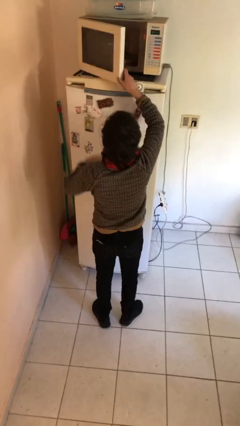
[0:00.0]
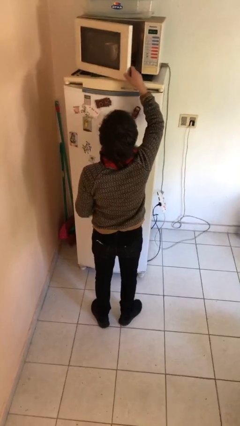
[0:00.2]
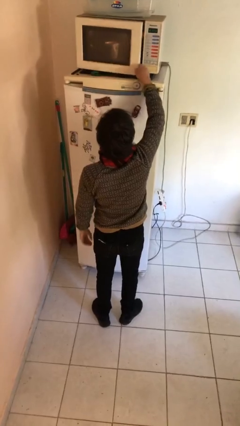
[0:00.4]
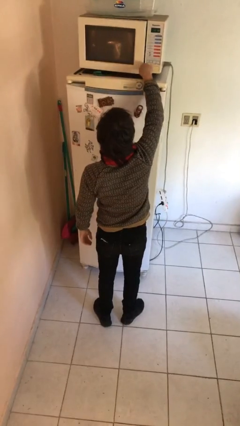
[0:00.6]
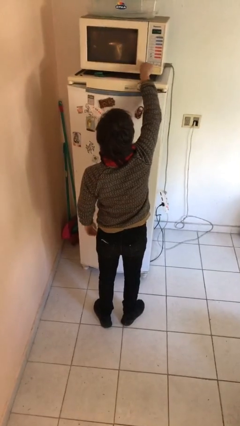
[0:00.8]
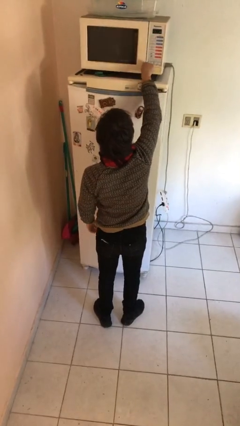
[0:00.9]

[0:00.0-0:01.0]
person closes microwave

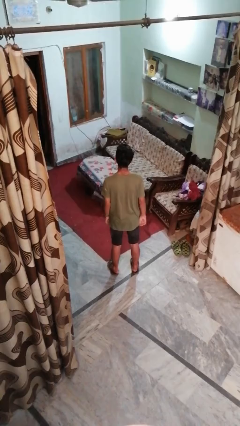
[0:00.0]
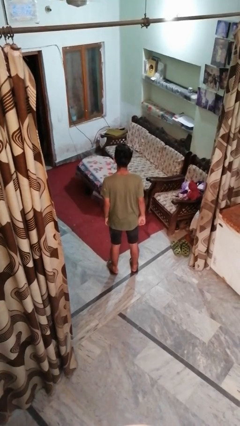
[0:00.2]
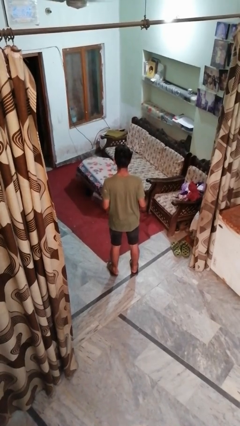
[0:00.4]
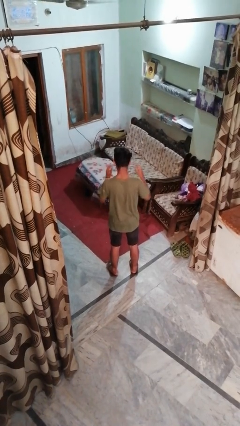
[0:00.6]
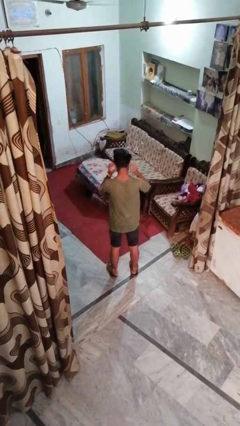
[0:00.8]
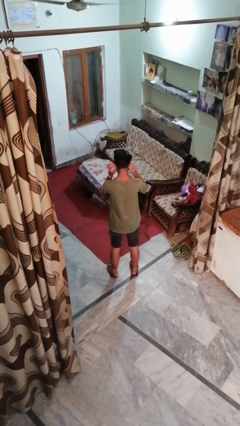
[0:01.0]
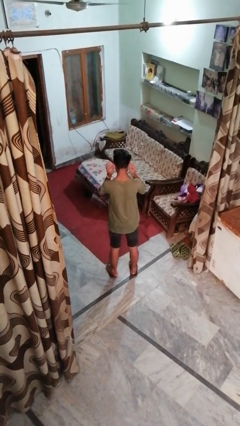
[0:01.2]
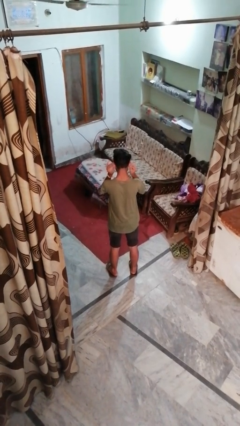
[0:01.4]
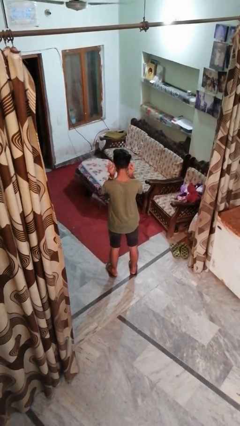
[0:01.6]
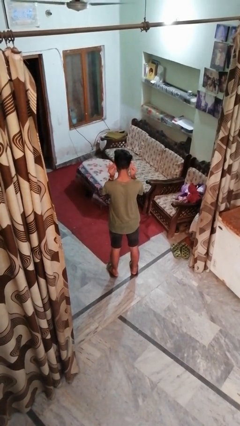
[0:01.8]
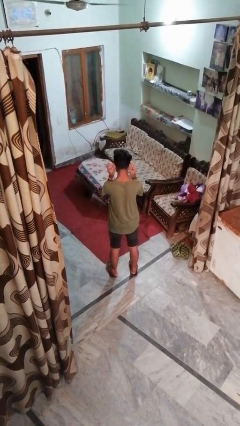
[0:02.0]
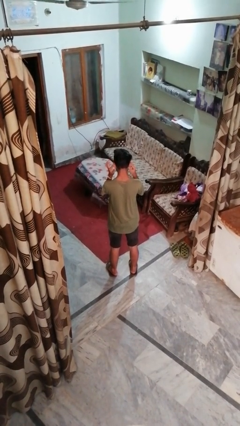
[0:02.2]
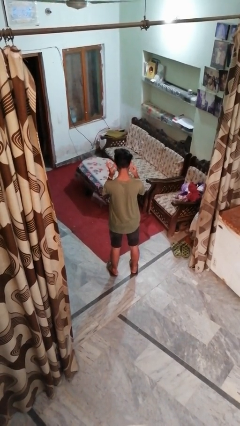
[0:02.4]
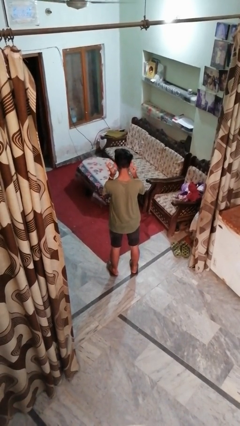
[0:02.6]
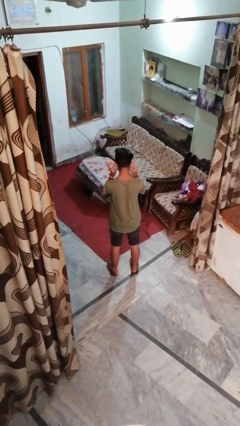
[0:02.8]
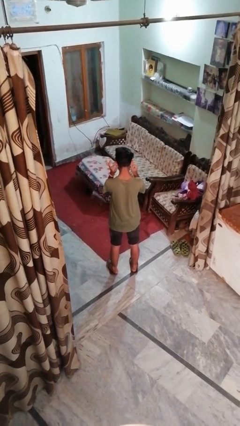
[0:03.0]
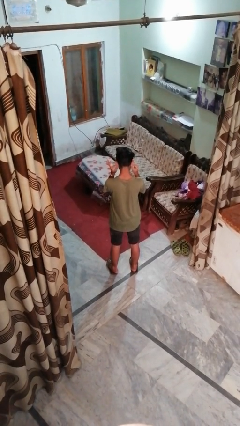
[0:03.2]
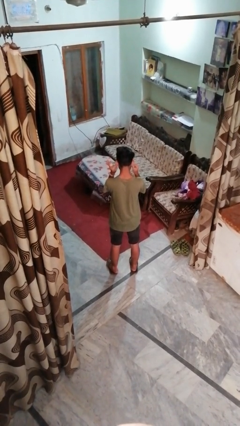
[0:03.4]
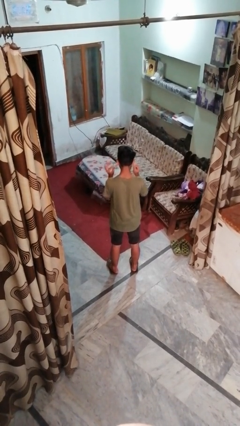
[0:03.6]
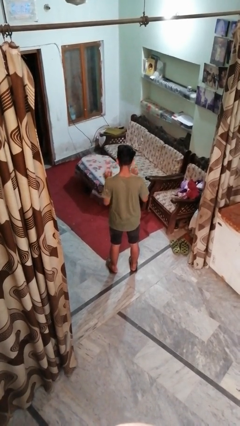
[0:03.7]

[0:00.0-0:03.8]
person touches earlobe

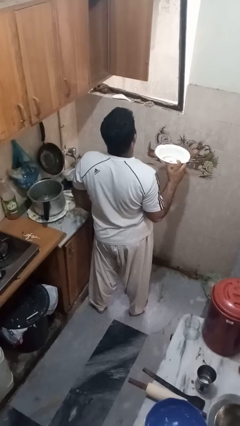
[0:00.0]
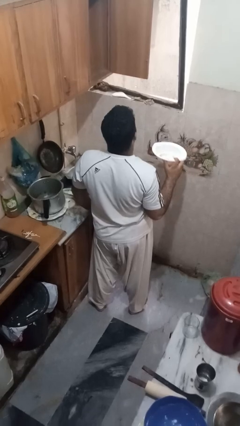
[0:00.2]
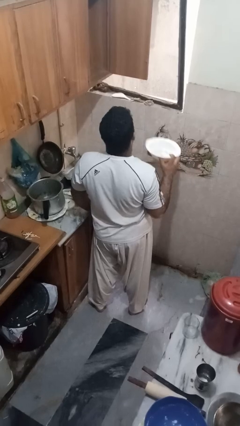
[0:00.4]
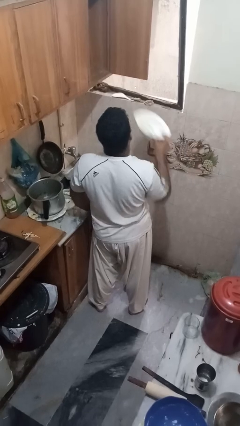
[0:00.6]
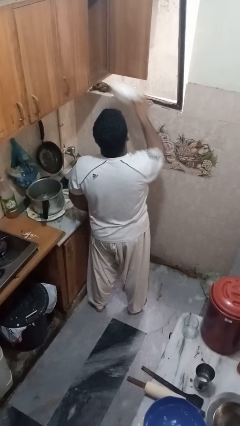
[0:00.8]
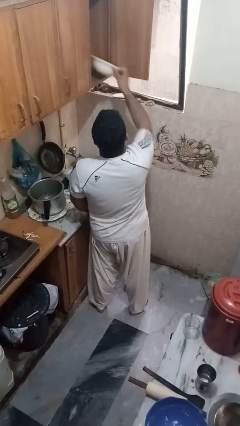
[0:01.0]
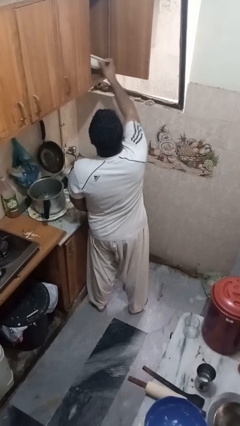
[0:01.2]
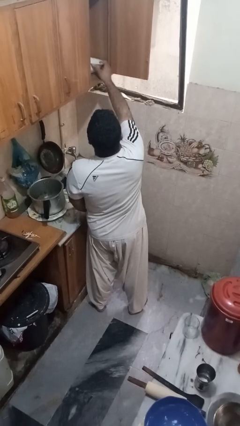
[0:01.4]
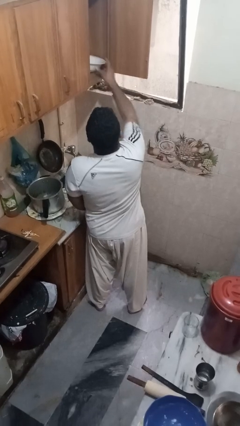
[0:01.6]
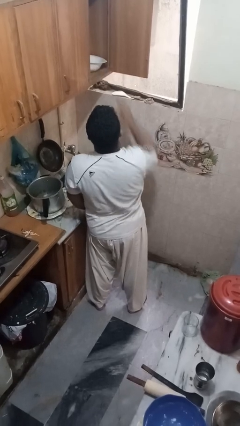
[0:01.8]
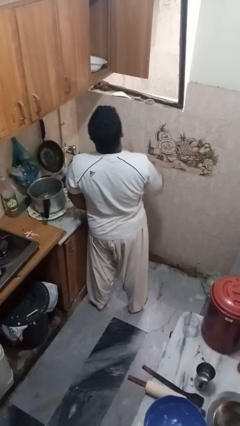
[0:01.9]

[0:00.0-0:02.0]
person puts object in cabinet

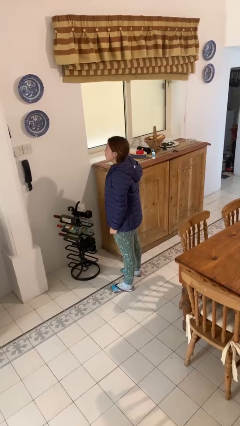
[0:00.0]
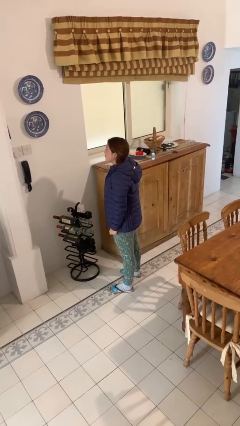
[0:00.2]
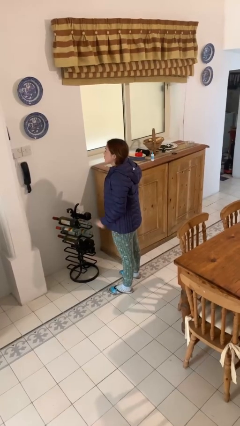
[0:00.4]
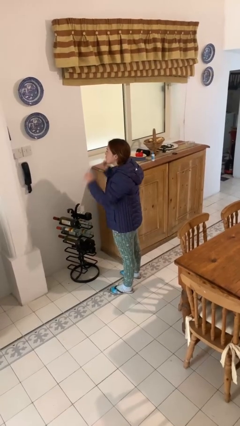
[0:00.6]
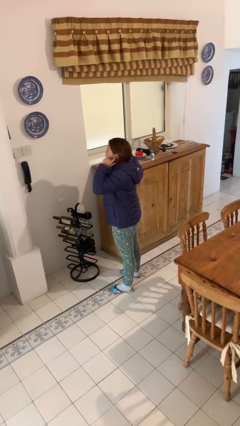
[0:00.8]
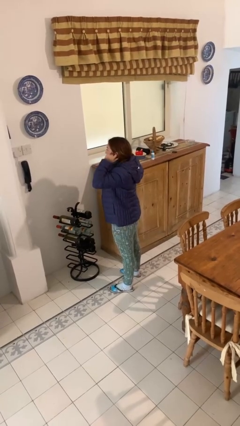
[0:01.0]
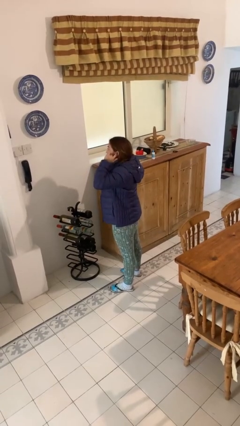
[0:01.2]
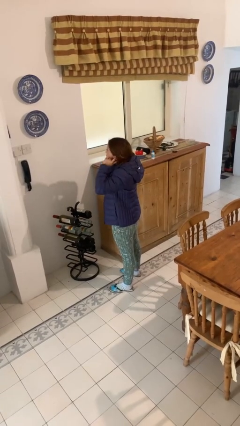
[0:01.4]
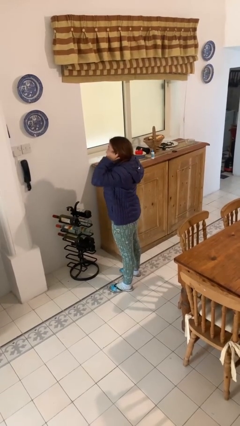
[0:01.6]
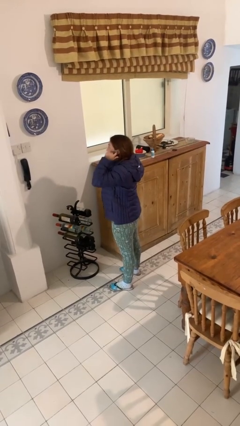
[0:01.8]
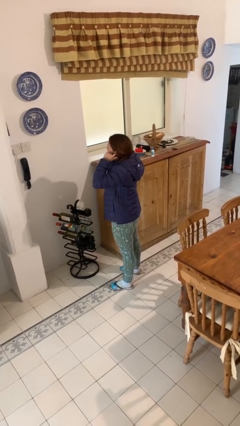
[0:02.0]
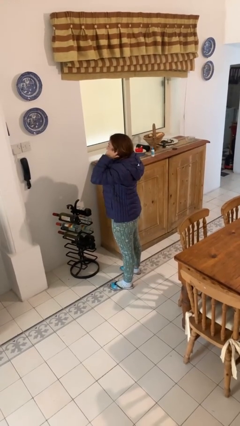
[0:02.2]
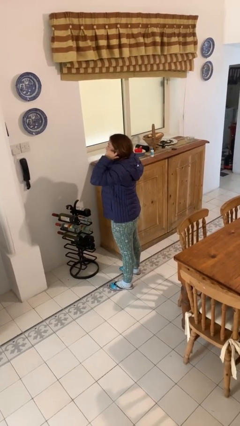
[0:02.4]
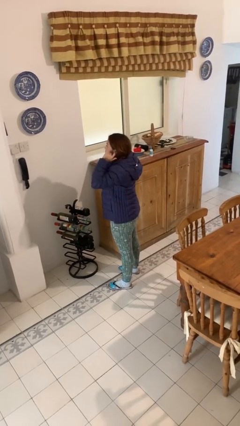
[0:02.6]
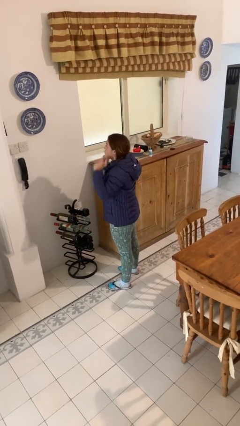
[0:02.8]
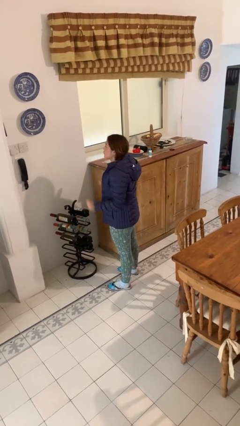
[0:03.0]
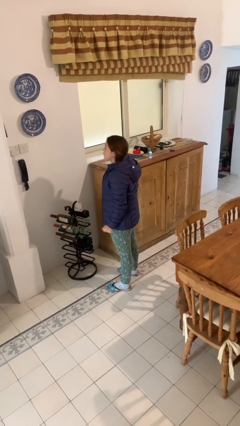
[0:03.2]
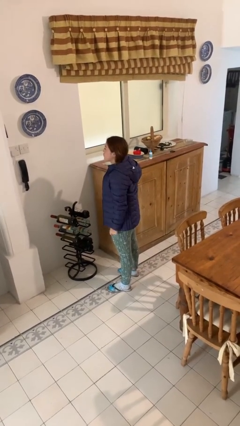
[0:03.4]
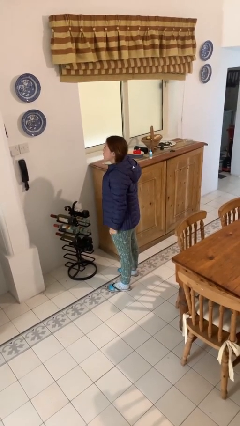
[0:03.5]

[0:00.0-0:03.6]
person puts fingers in ear

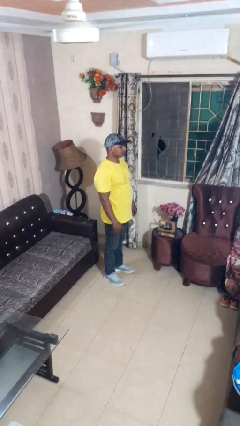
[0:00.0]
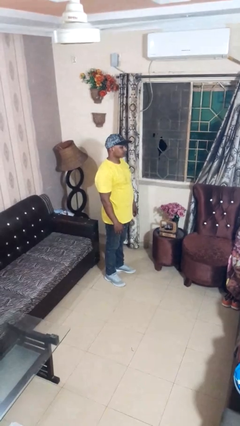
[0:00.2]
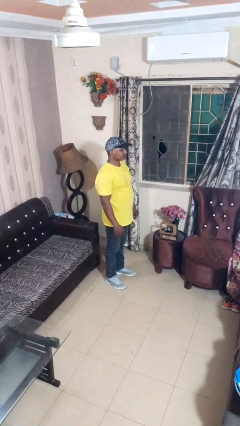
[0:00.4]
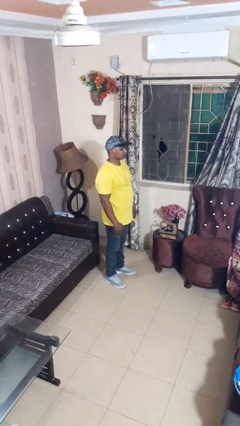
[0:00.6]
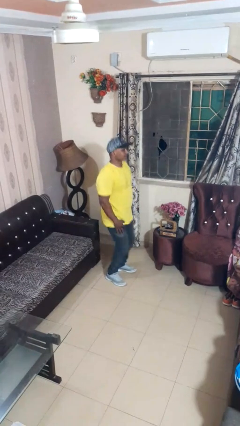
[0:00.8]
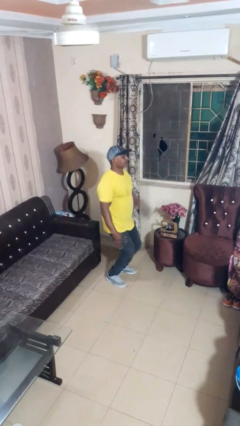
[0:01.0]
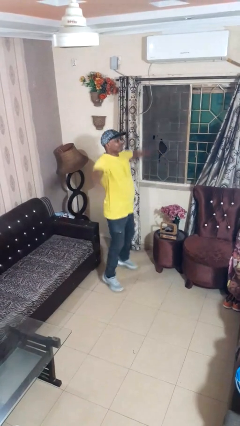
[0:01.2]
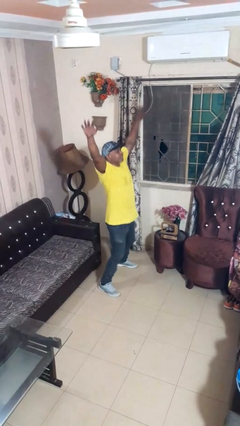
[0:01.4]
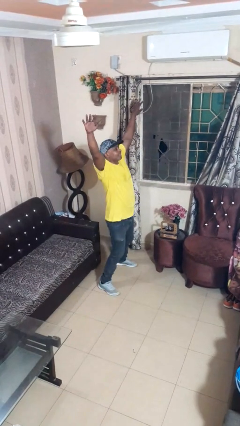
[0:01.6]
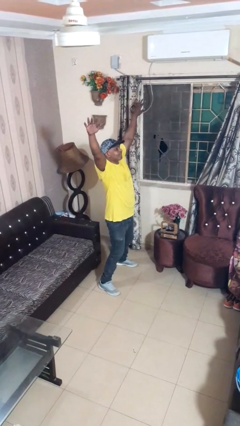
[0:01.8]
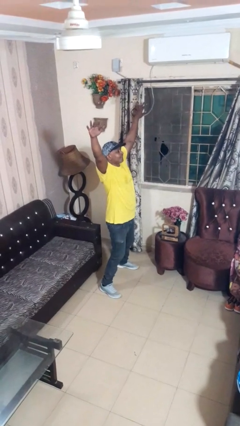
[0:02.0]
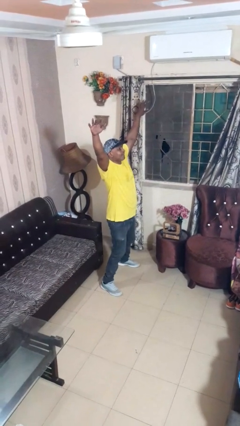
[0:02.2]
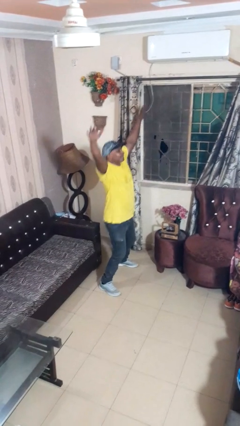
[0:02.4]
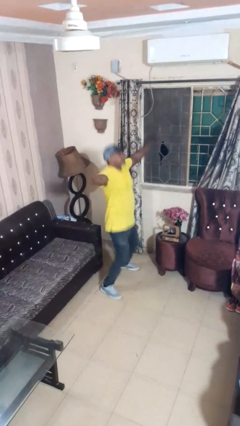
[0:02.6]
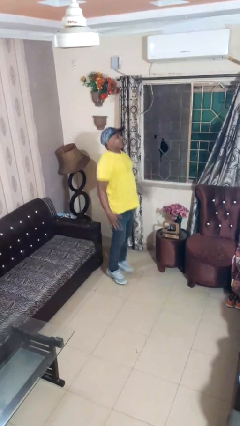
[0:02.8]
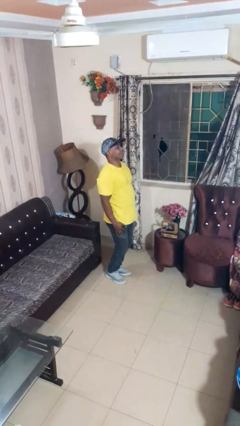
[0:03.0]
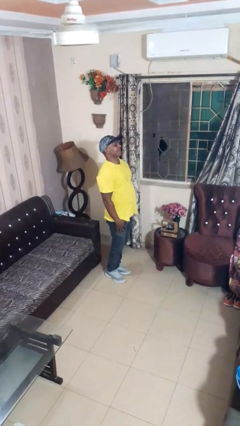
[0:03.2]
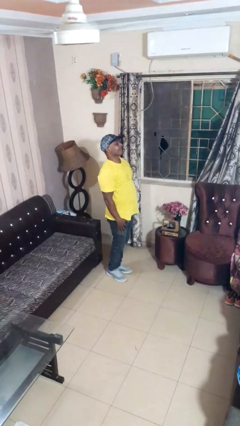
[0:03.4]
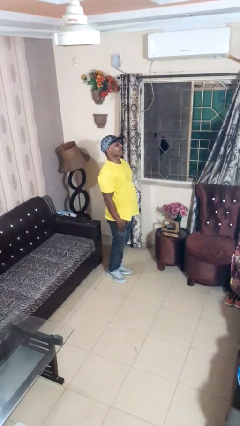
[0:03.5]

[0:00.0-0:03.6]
person exercises with jumping jacks

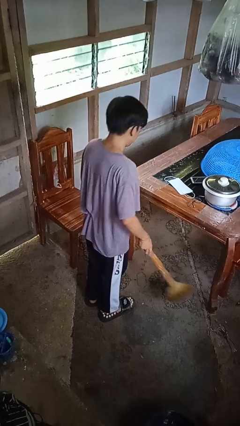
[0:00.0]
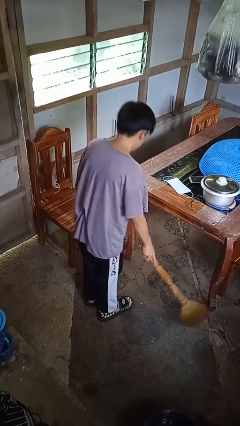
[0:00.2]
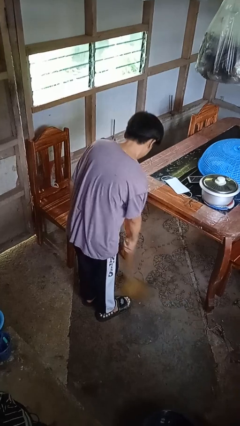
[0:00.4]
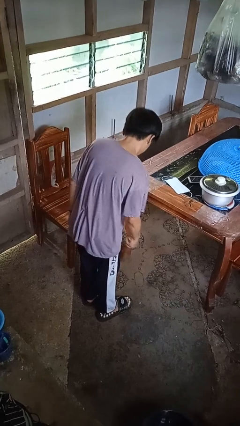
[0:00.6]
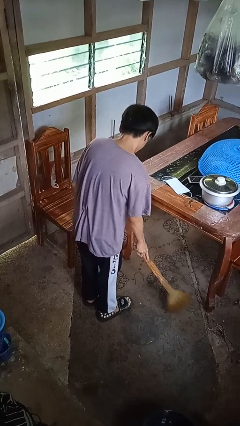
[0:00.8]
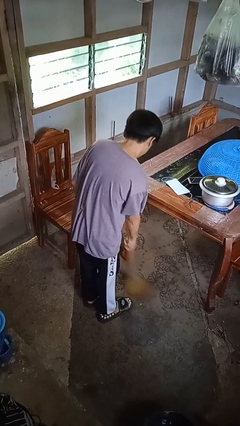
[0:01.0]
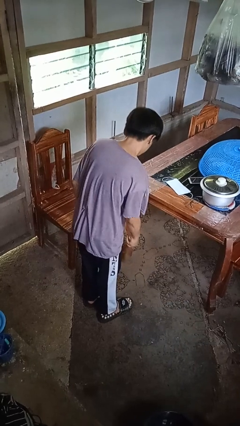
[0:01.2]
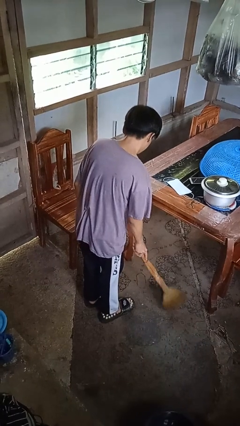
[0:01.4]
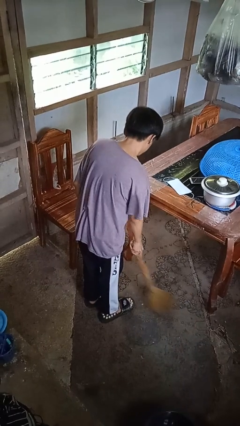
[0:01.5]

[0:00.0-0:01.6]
person sweeps floor

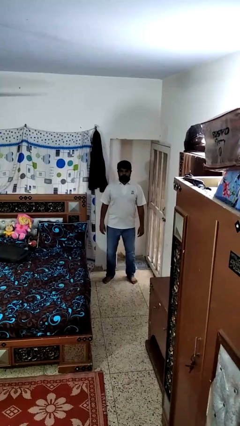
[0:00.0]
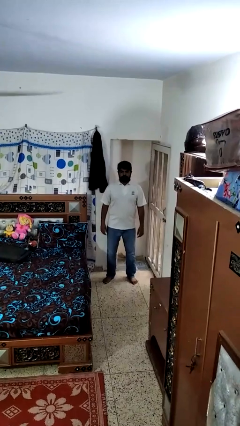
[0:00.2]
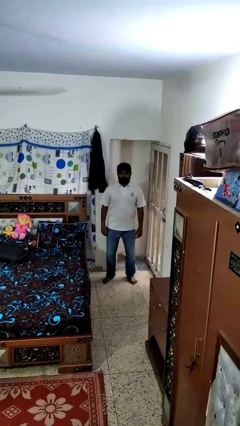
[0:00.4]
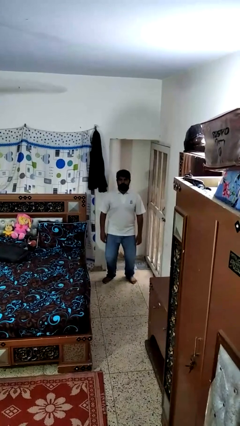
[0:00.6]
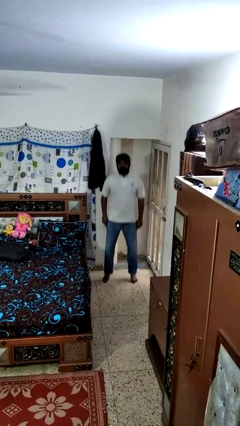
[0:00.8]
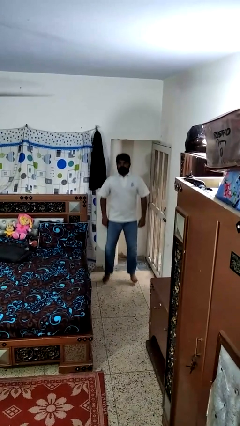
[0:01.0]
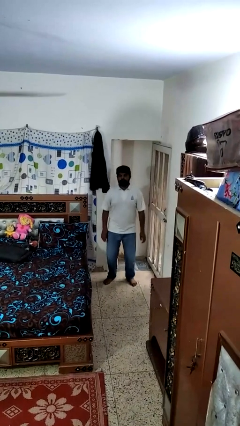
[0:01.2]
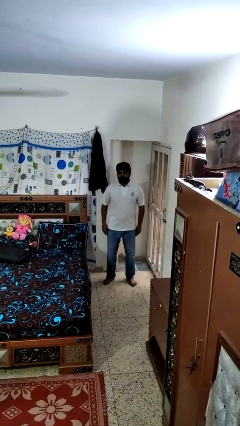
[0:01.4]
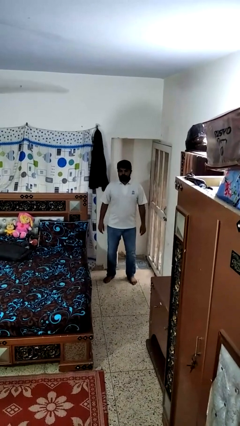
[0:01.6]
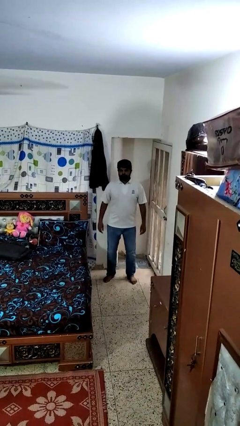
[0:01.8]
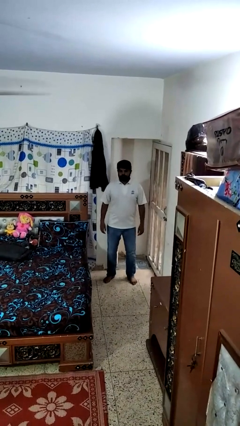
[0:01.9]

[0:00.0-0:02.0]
person jumps
